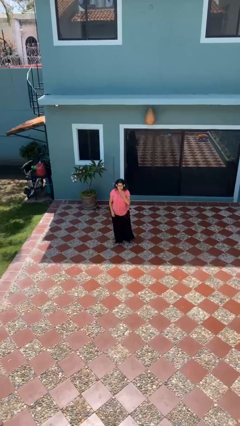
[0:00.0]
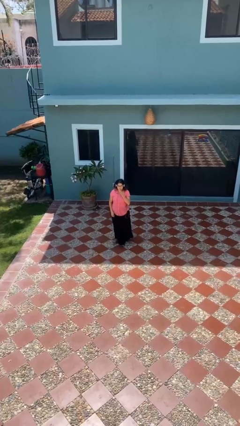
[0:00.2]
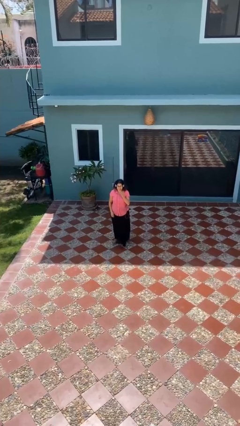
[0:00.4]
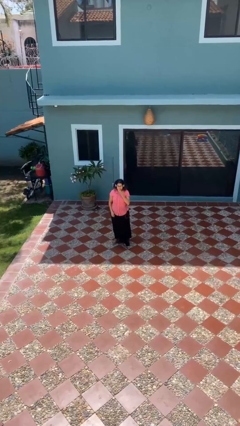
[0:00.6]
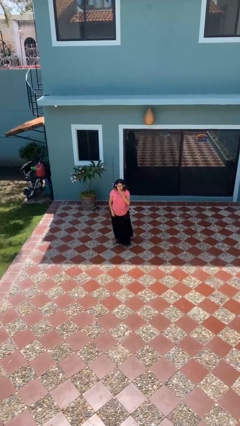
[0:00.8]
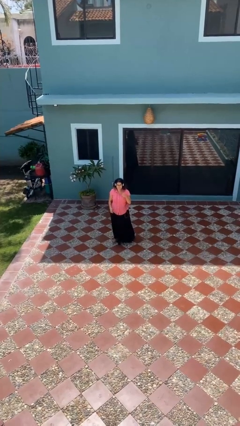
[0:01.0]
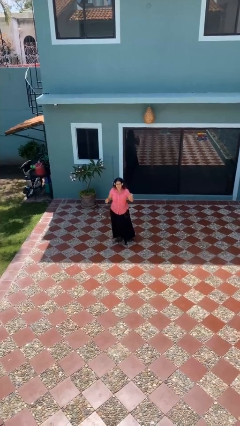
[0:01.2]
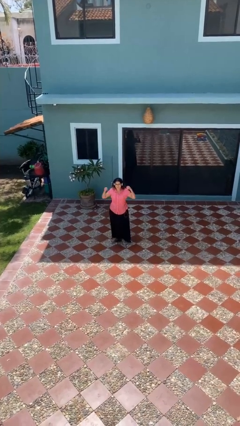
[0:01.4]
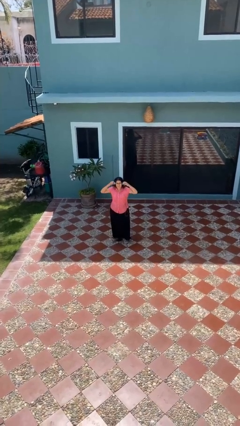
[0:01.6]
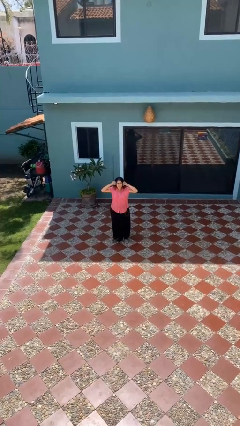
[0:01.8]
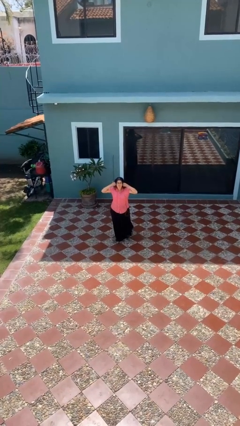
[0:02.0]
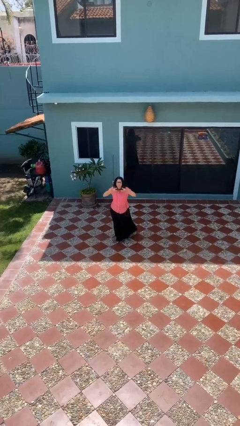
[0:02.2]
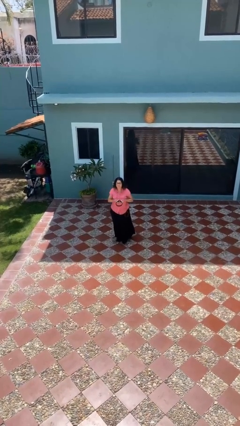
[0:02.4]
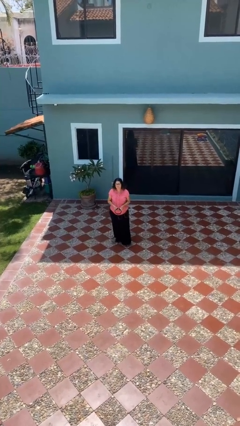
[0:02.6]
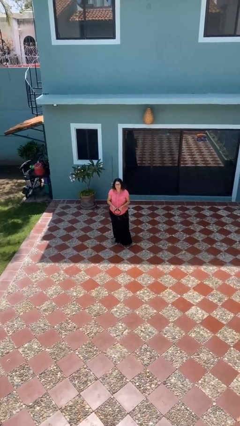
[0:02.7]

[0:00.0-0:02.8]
person takes off headphones

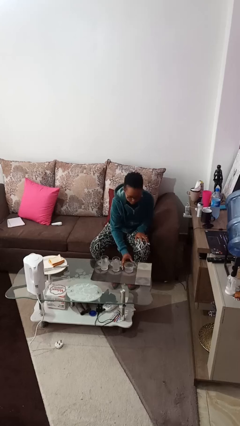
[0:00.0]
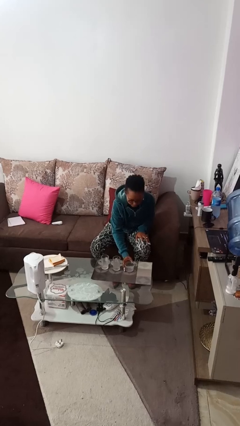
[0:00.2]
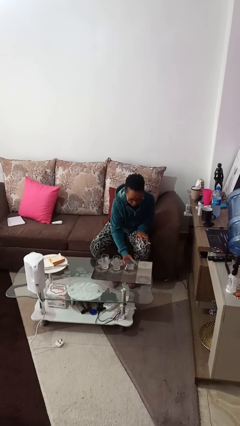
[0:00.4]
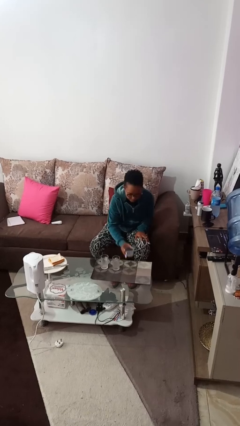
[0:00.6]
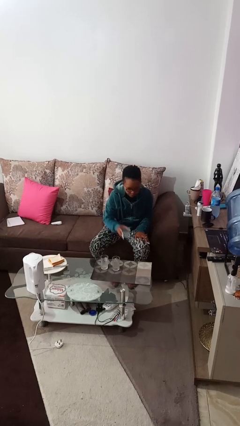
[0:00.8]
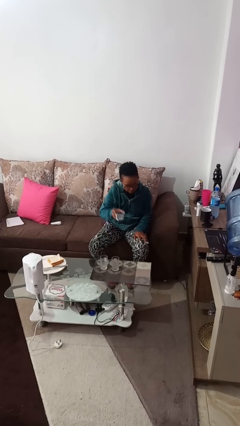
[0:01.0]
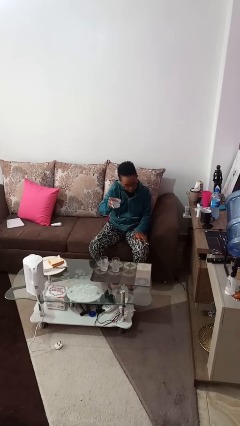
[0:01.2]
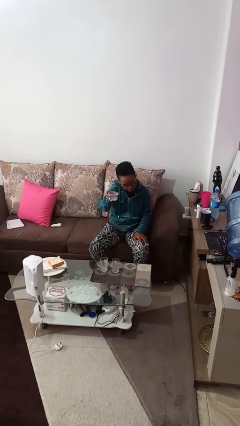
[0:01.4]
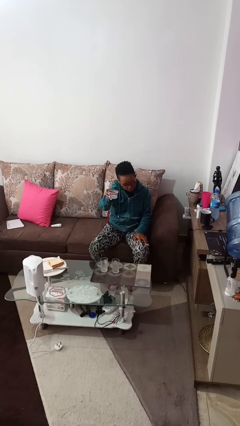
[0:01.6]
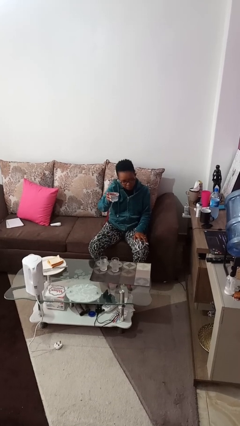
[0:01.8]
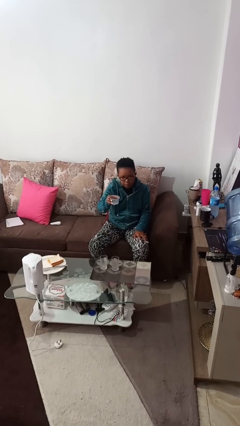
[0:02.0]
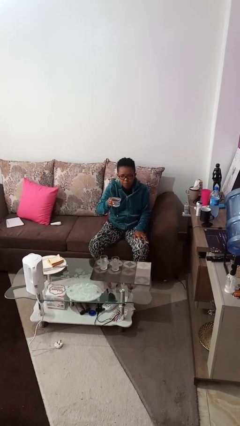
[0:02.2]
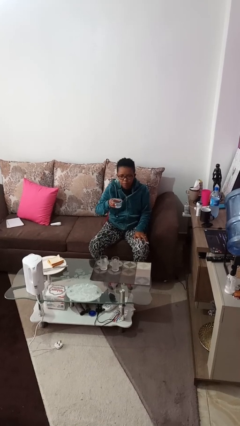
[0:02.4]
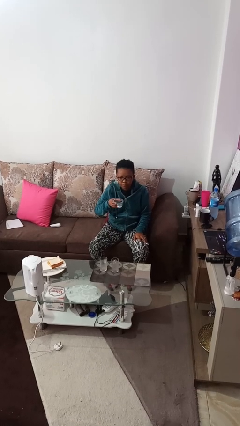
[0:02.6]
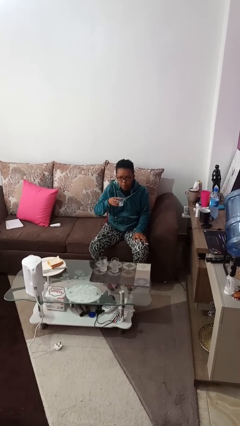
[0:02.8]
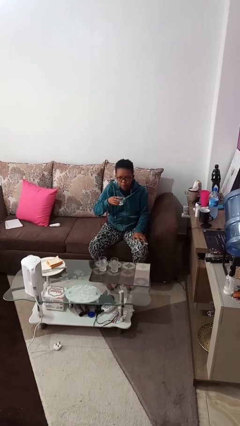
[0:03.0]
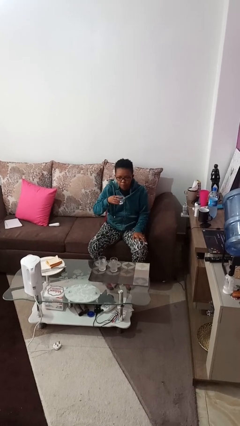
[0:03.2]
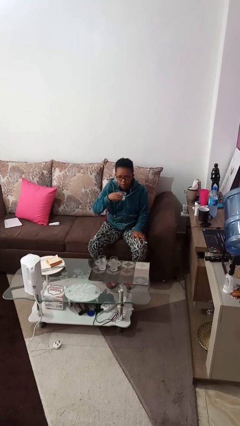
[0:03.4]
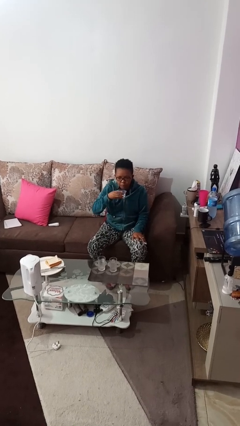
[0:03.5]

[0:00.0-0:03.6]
person picks up object from table

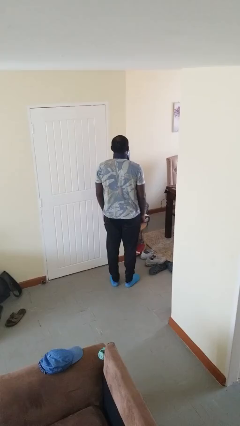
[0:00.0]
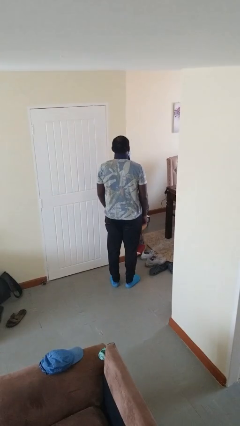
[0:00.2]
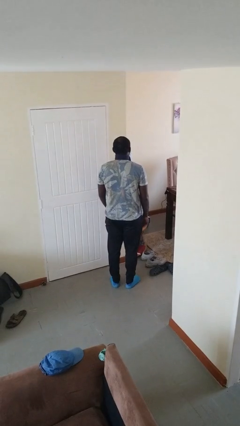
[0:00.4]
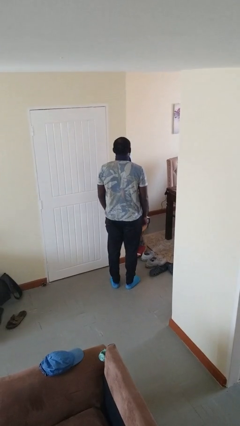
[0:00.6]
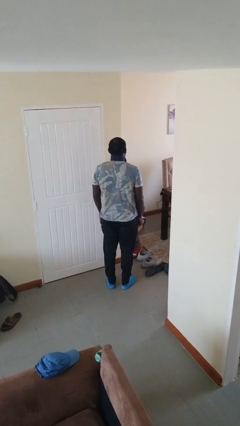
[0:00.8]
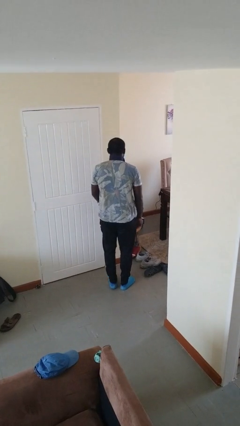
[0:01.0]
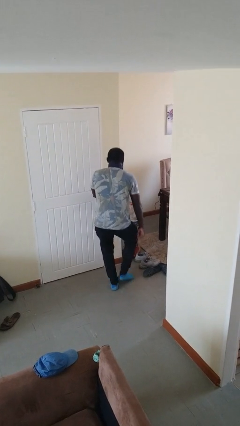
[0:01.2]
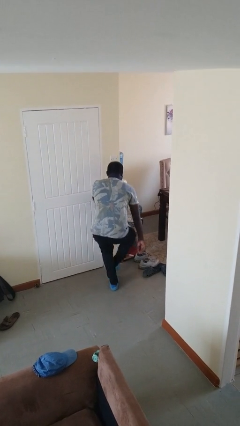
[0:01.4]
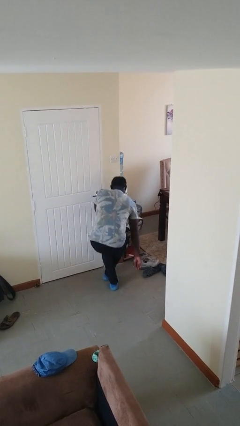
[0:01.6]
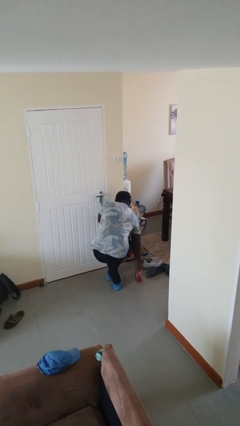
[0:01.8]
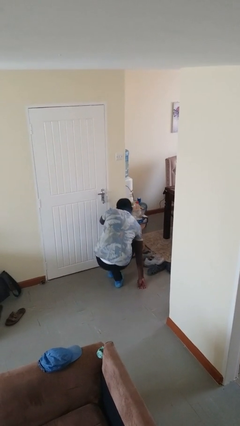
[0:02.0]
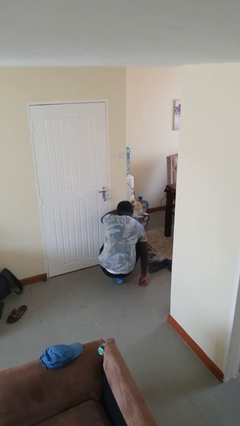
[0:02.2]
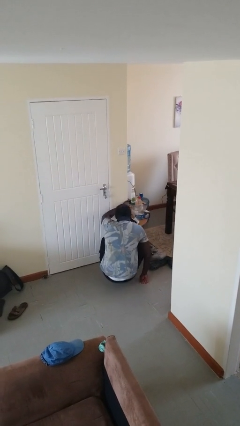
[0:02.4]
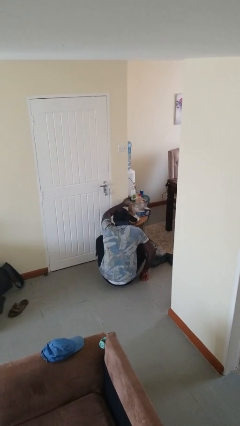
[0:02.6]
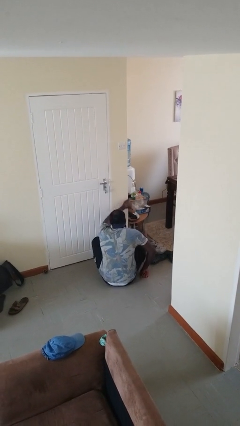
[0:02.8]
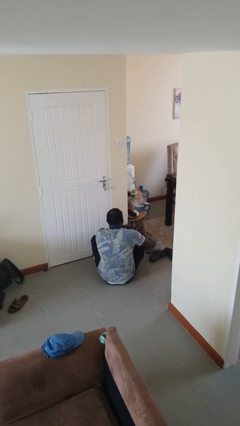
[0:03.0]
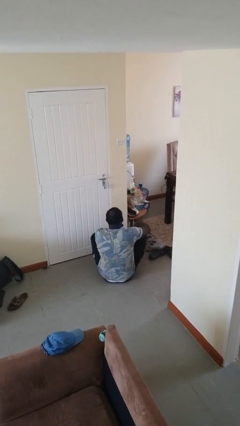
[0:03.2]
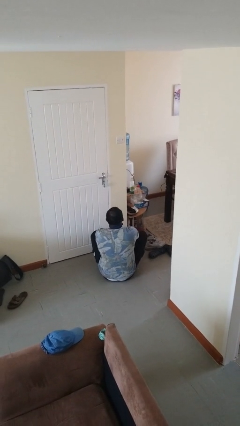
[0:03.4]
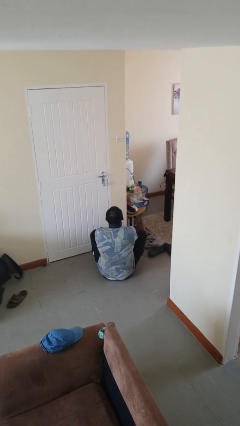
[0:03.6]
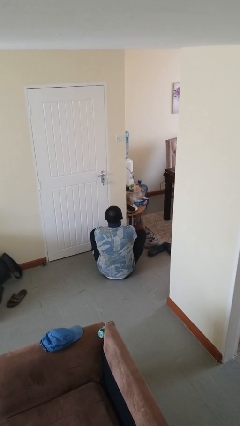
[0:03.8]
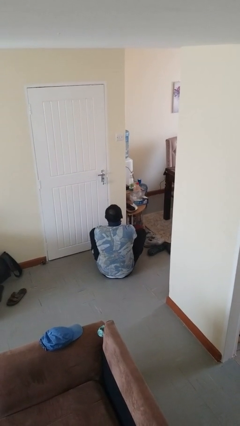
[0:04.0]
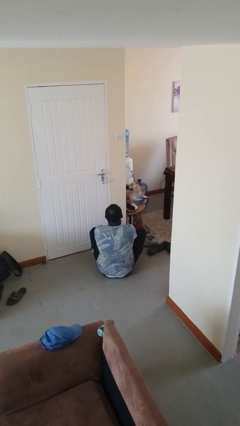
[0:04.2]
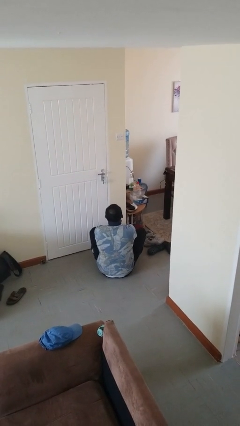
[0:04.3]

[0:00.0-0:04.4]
person sits crisscross

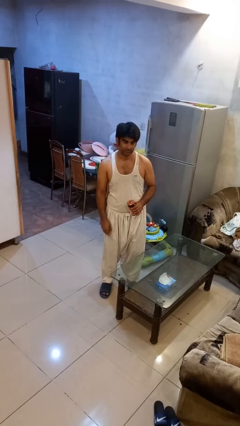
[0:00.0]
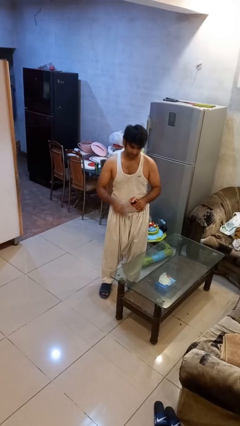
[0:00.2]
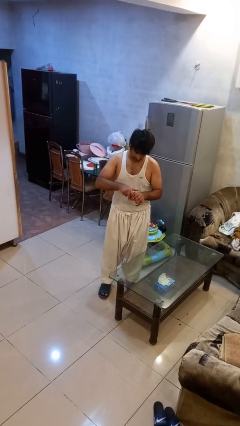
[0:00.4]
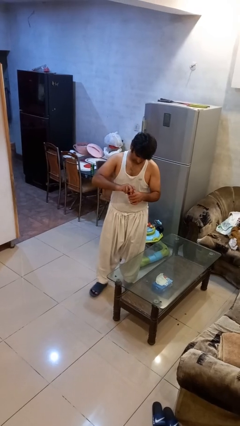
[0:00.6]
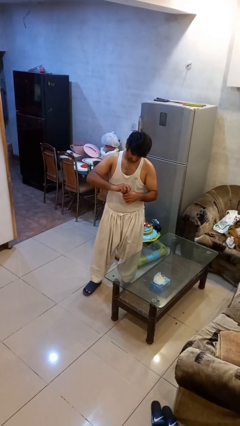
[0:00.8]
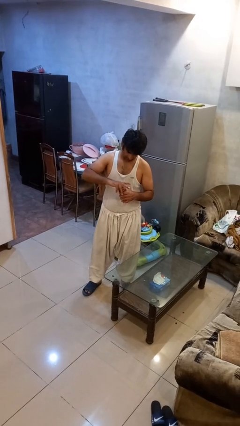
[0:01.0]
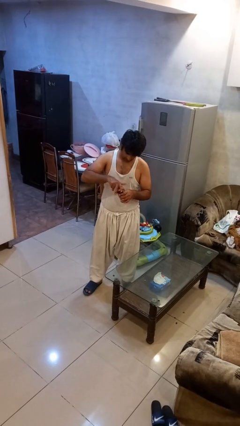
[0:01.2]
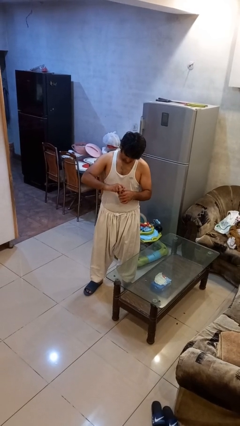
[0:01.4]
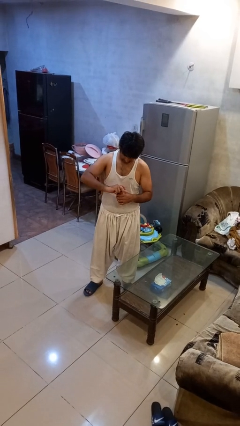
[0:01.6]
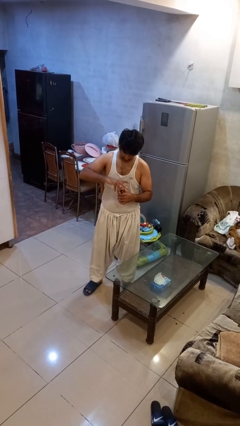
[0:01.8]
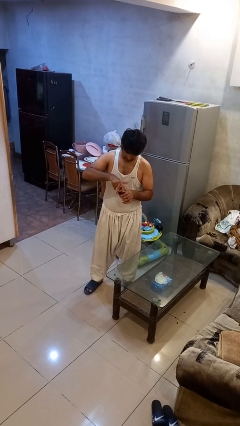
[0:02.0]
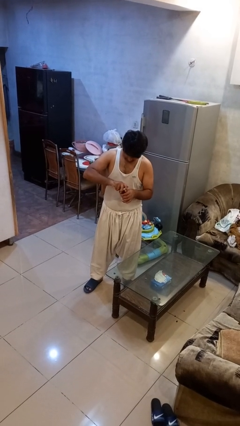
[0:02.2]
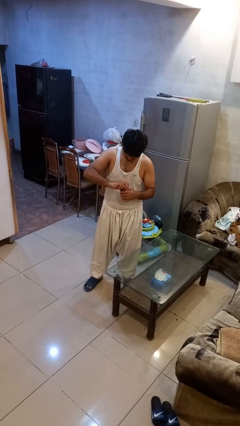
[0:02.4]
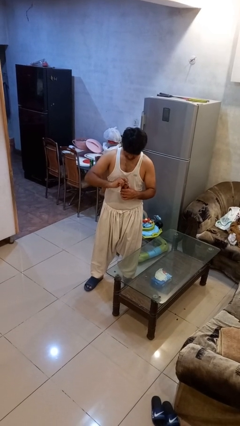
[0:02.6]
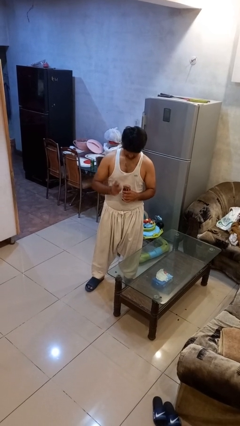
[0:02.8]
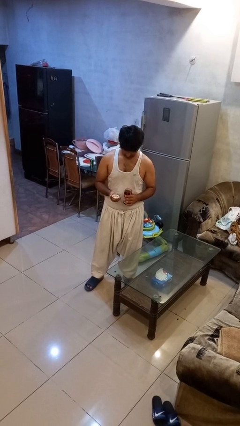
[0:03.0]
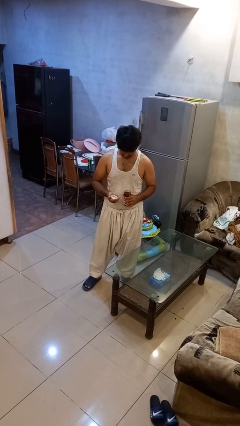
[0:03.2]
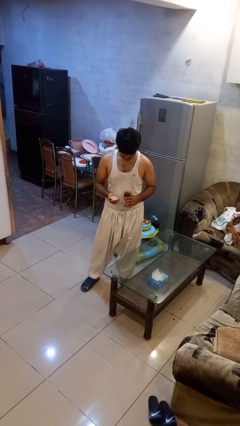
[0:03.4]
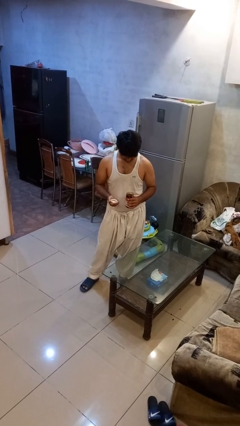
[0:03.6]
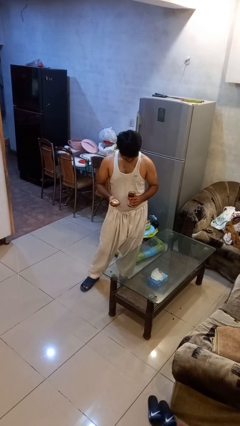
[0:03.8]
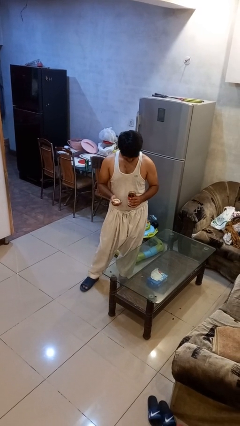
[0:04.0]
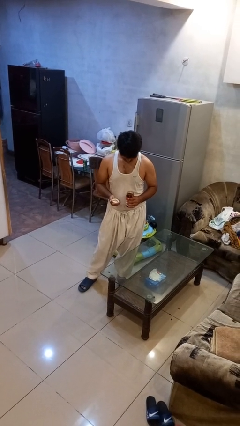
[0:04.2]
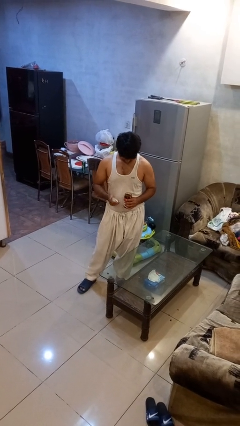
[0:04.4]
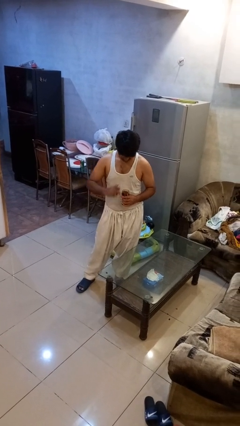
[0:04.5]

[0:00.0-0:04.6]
person opens jar

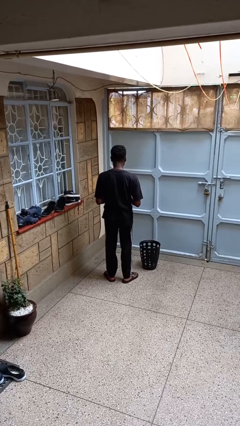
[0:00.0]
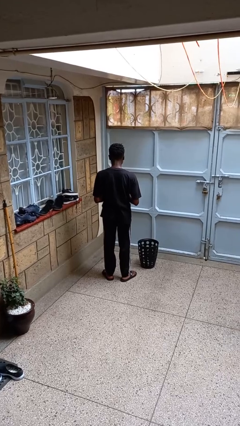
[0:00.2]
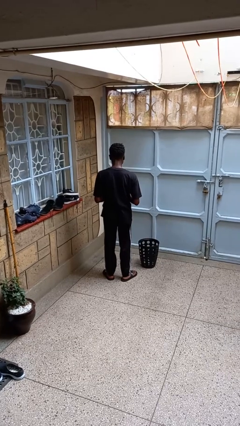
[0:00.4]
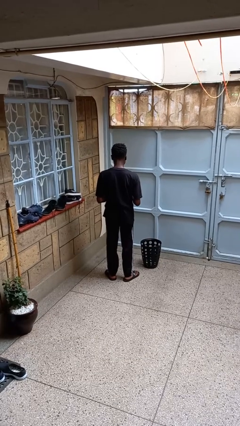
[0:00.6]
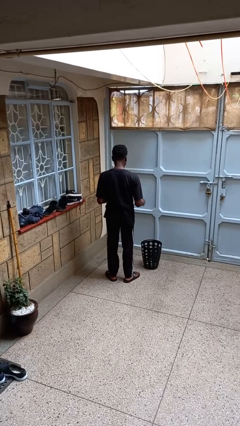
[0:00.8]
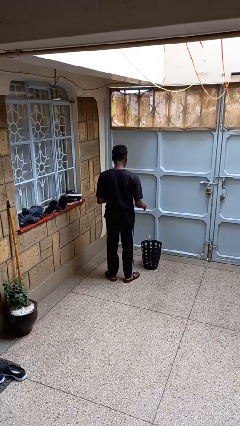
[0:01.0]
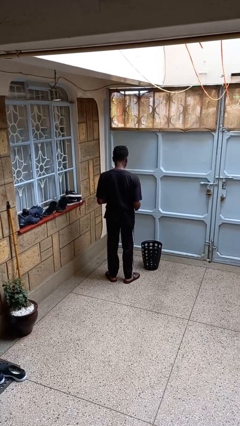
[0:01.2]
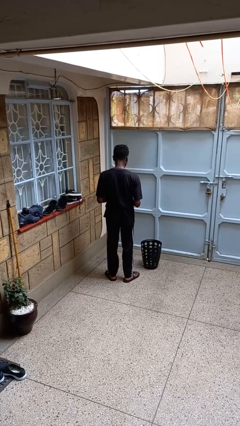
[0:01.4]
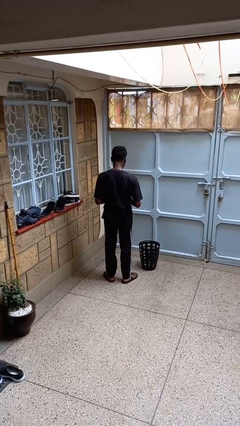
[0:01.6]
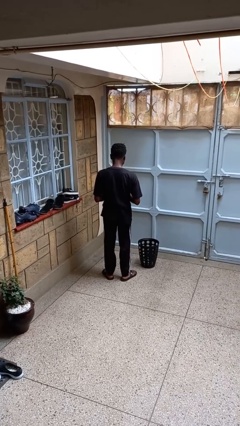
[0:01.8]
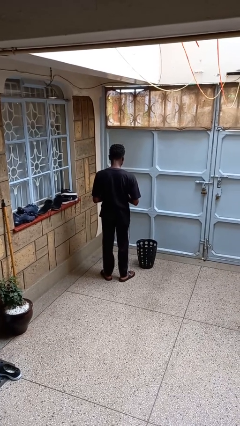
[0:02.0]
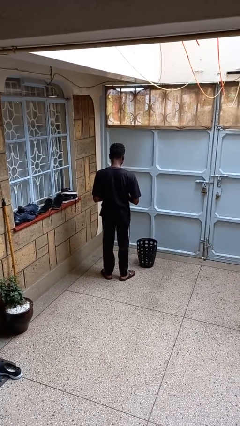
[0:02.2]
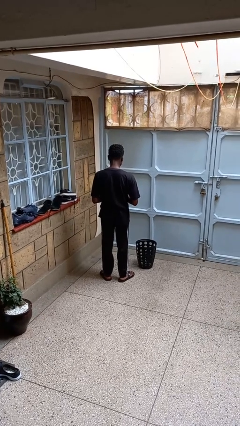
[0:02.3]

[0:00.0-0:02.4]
person discards trash
